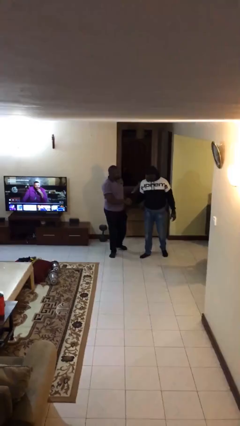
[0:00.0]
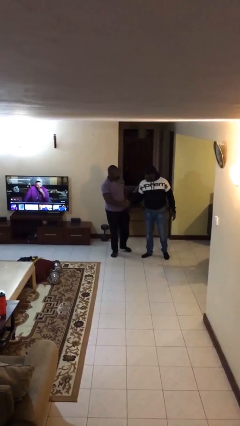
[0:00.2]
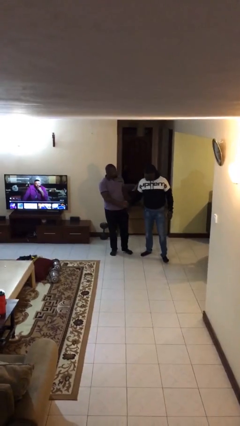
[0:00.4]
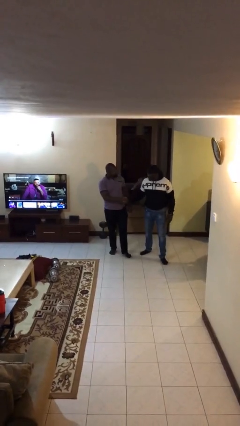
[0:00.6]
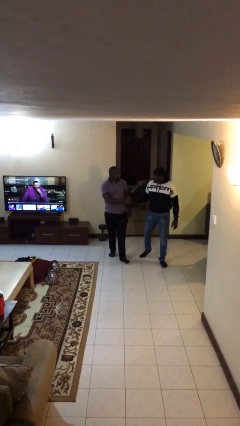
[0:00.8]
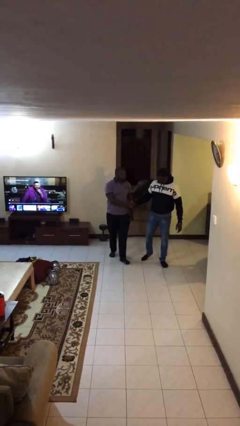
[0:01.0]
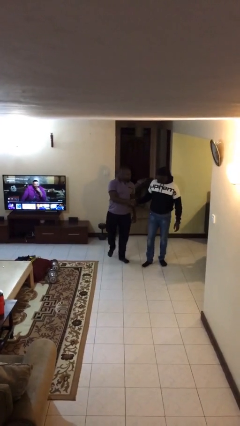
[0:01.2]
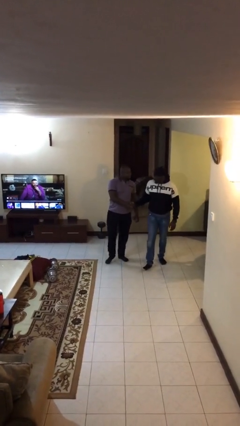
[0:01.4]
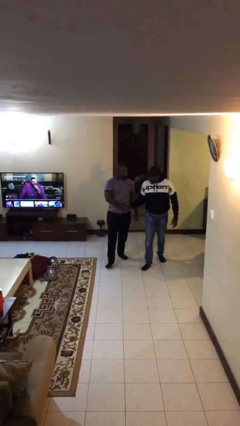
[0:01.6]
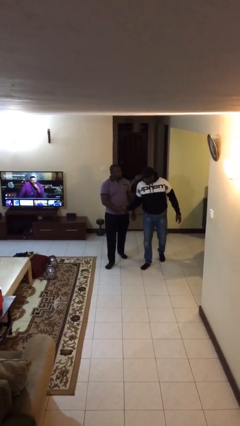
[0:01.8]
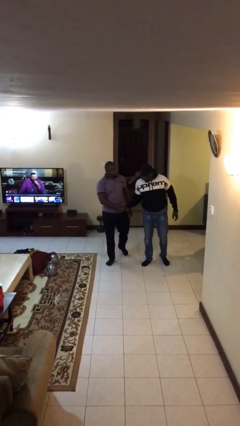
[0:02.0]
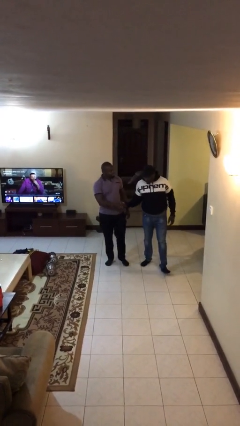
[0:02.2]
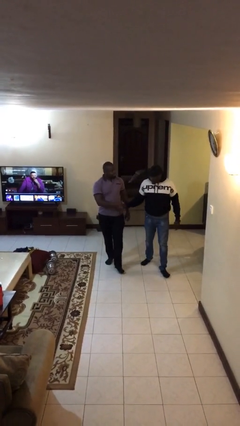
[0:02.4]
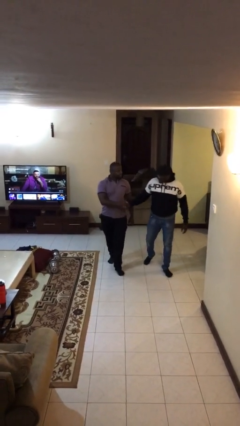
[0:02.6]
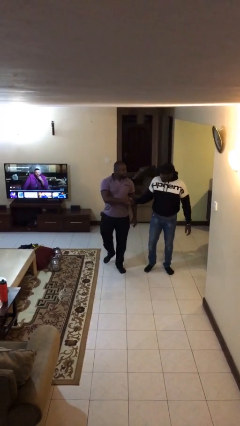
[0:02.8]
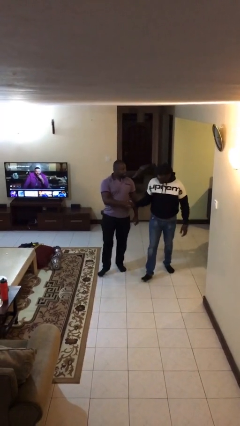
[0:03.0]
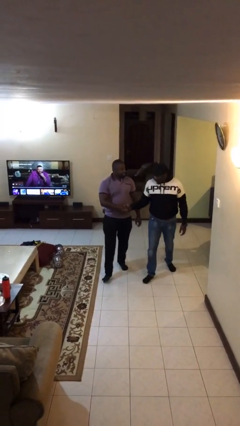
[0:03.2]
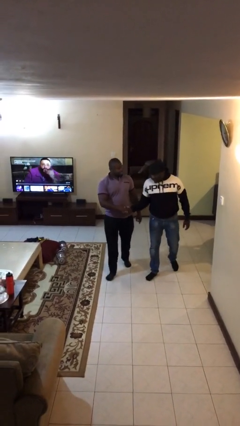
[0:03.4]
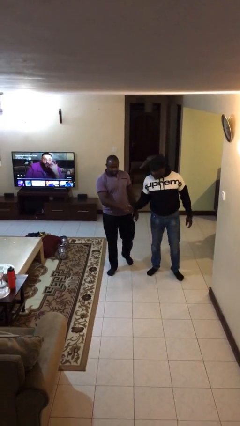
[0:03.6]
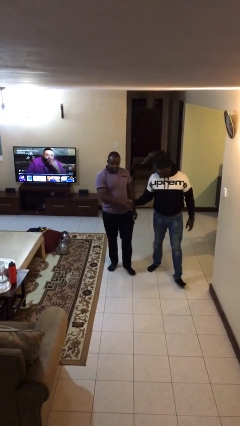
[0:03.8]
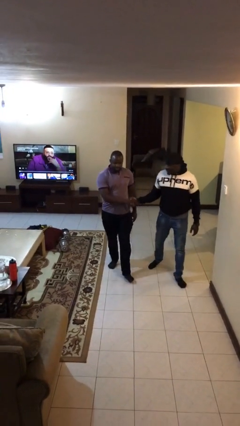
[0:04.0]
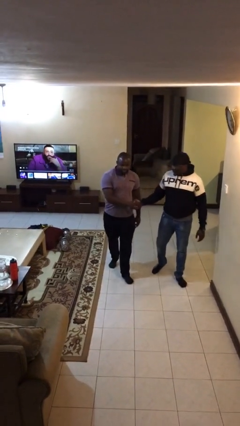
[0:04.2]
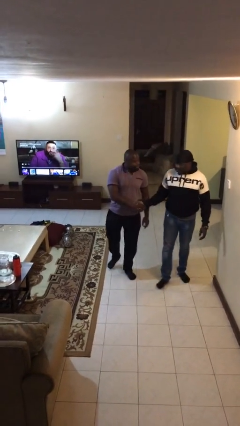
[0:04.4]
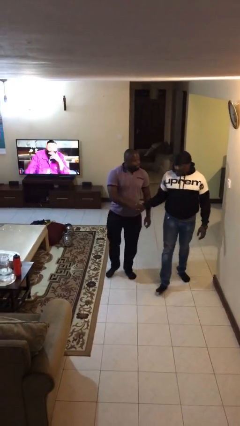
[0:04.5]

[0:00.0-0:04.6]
person holds hand

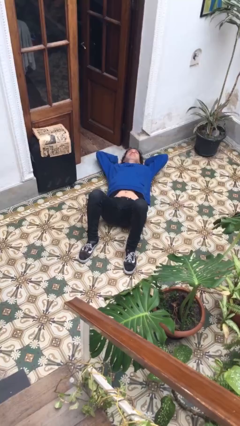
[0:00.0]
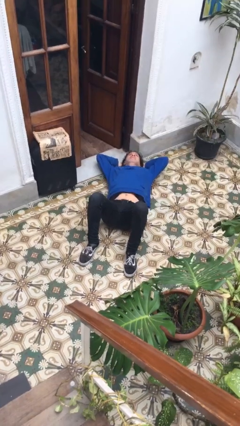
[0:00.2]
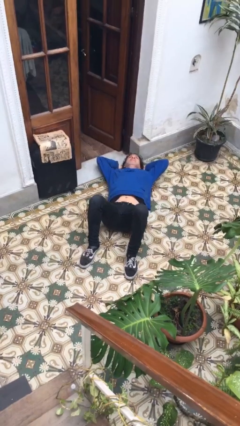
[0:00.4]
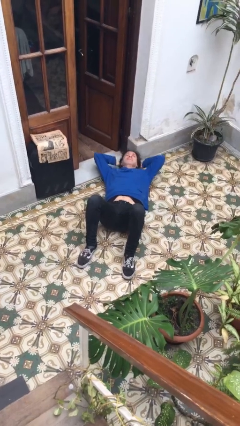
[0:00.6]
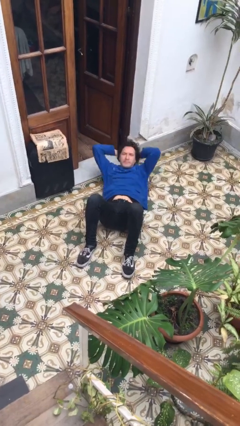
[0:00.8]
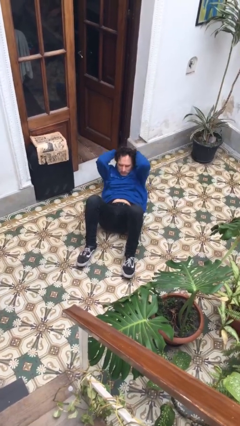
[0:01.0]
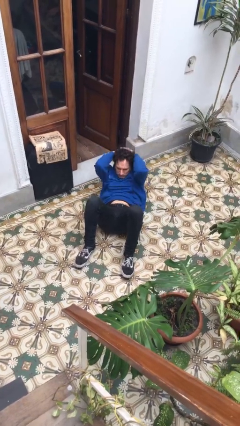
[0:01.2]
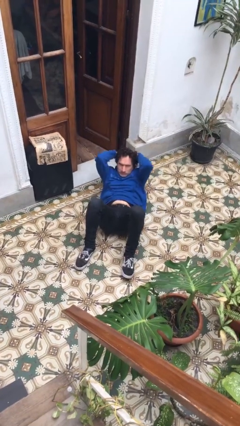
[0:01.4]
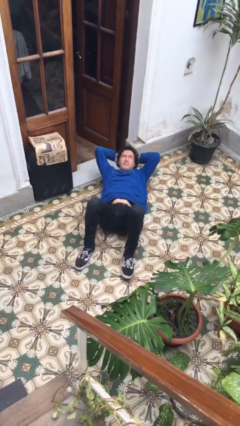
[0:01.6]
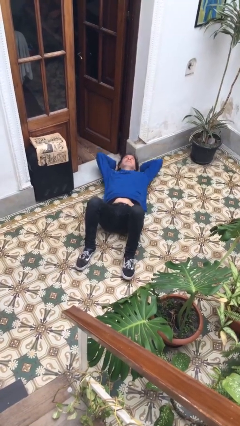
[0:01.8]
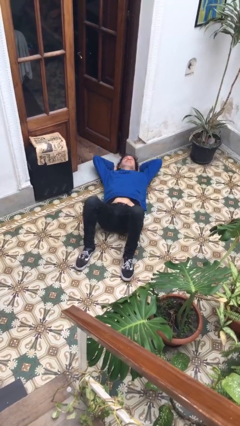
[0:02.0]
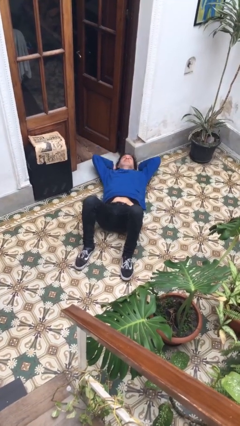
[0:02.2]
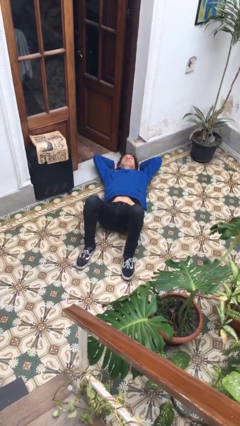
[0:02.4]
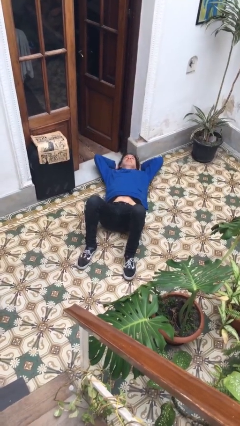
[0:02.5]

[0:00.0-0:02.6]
person exercises with situp

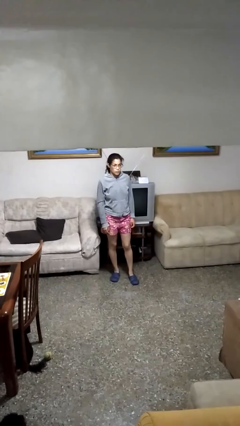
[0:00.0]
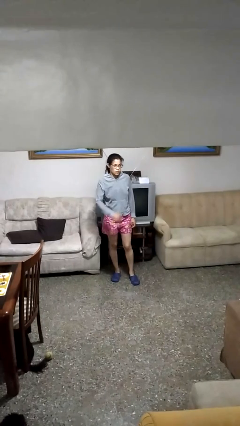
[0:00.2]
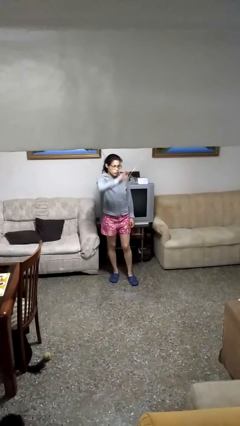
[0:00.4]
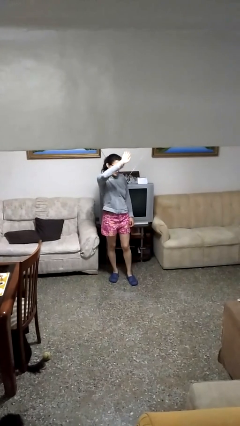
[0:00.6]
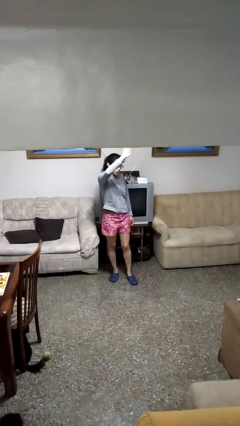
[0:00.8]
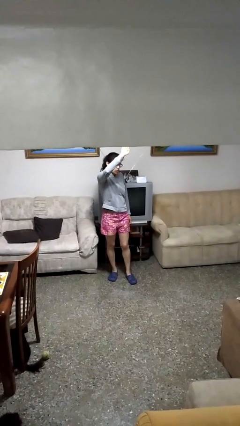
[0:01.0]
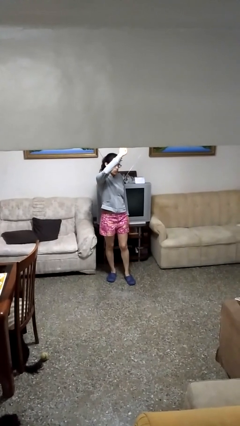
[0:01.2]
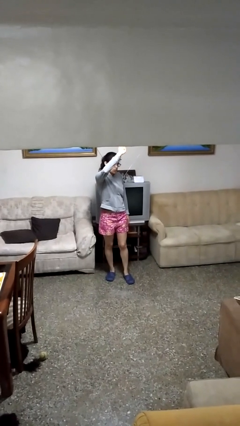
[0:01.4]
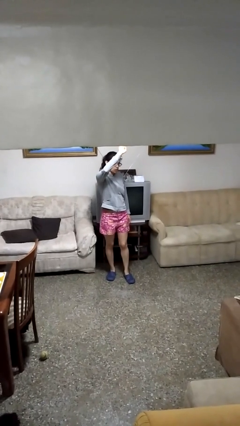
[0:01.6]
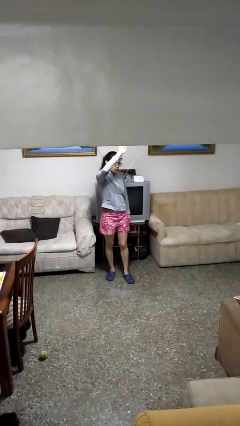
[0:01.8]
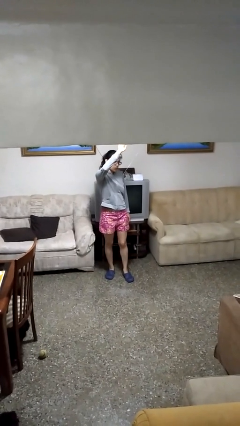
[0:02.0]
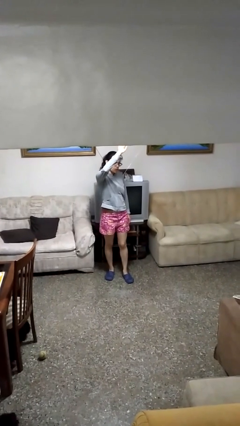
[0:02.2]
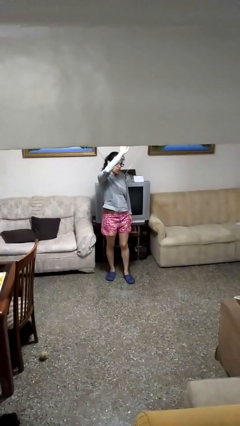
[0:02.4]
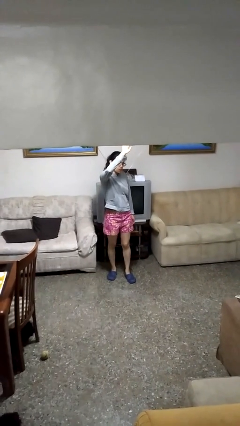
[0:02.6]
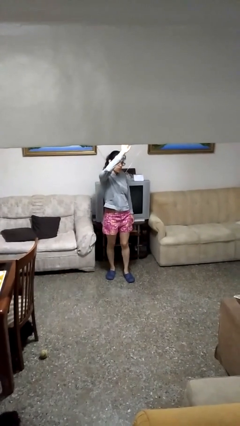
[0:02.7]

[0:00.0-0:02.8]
person gestures raise hand

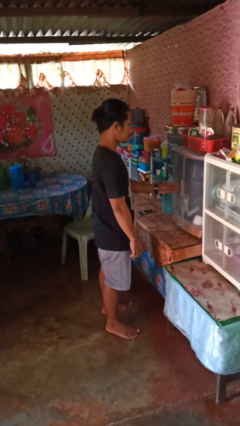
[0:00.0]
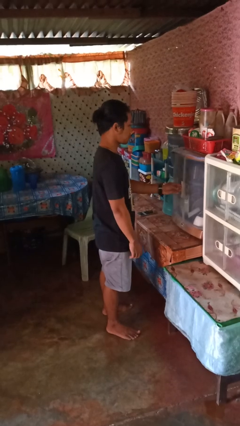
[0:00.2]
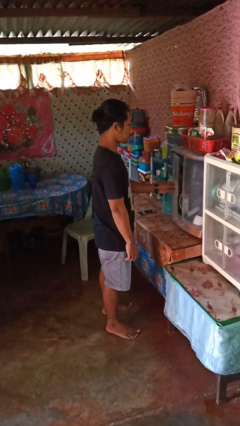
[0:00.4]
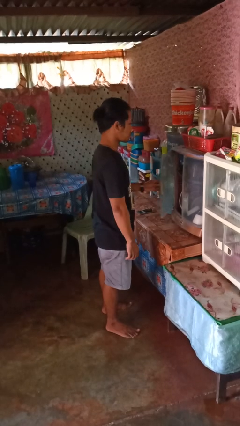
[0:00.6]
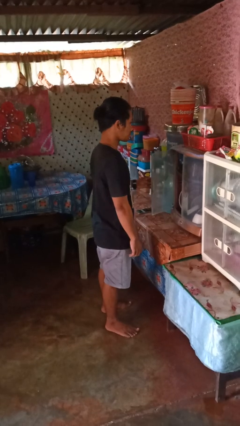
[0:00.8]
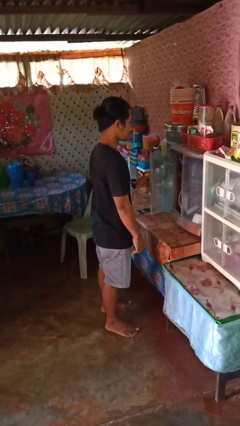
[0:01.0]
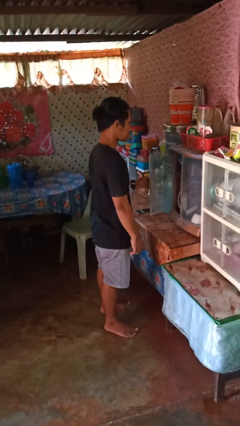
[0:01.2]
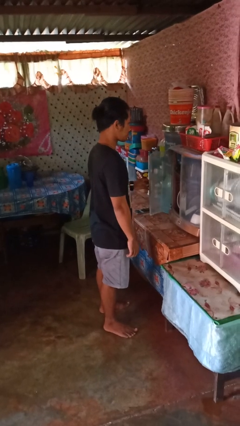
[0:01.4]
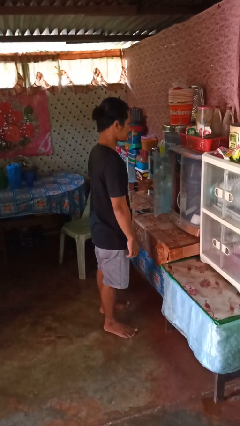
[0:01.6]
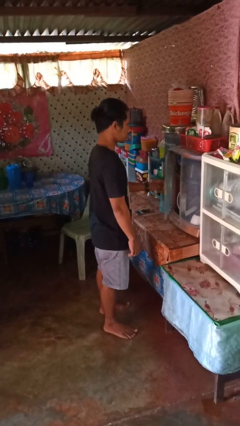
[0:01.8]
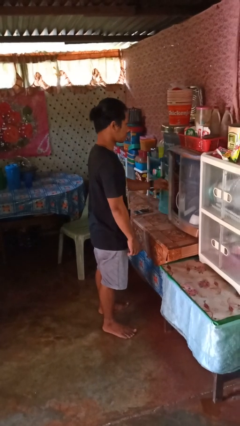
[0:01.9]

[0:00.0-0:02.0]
person opens cabinet

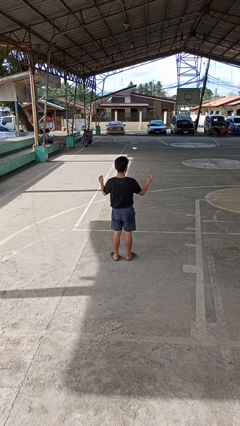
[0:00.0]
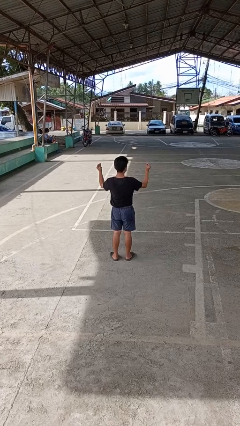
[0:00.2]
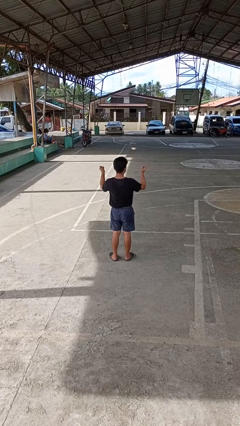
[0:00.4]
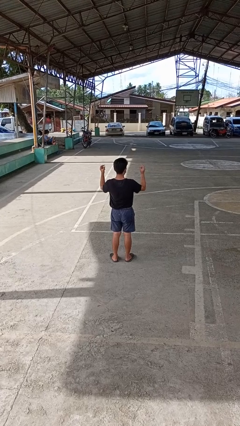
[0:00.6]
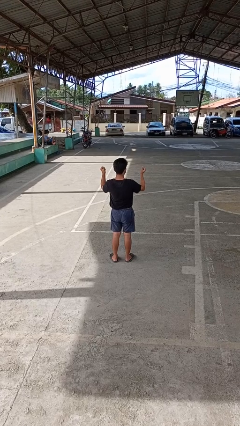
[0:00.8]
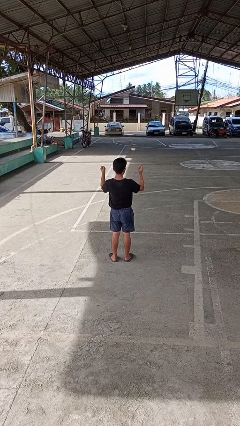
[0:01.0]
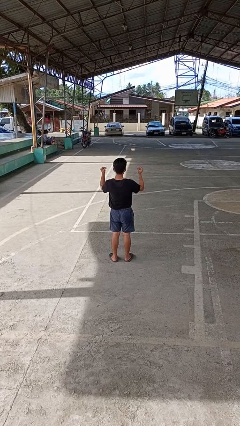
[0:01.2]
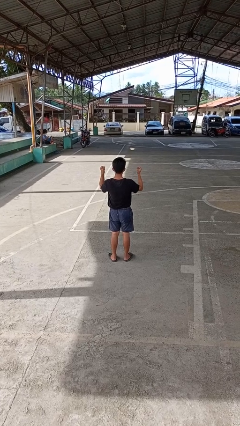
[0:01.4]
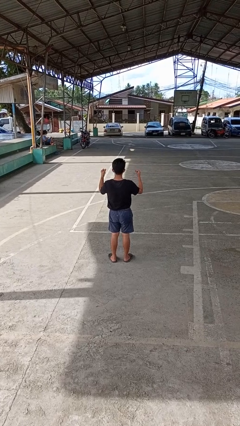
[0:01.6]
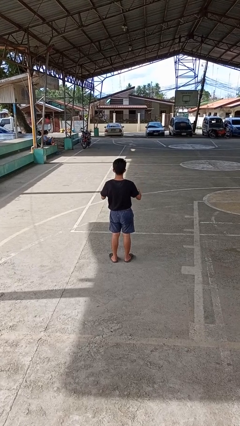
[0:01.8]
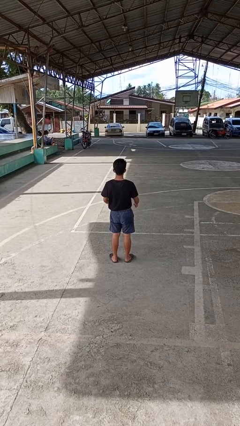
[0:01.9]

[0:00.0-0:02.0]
person snaps fingers

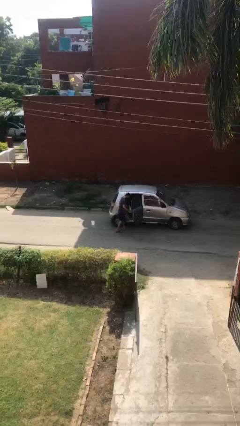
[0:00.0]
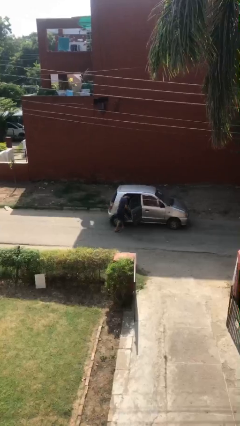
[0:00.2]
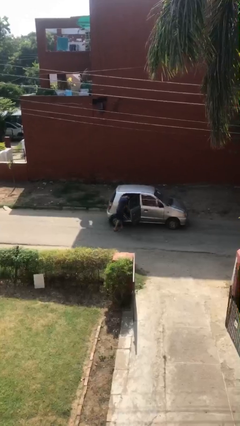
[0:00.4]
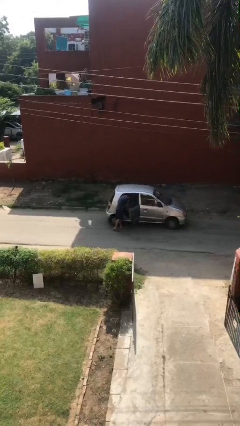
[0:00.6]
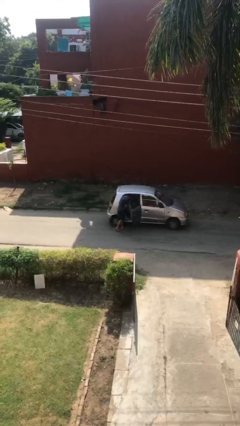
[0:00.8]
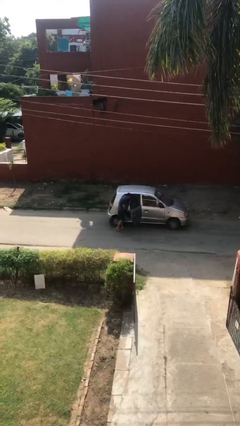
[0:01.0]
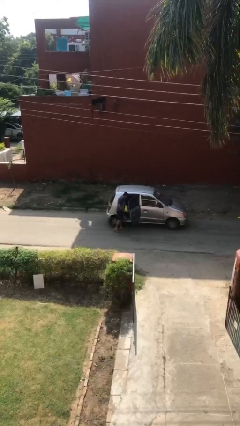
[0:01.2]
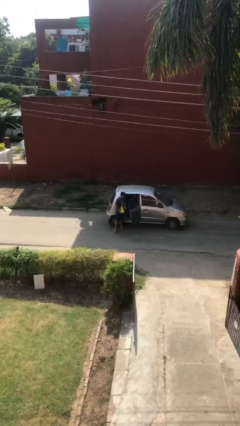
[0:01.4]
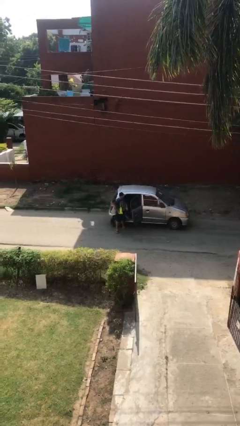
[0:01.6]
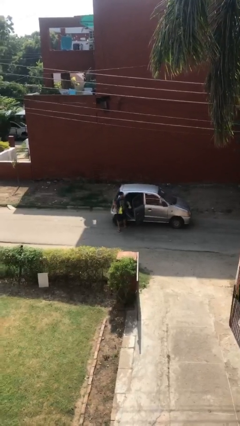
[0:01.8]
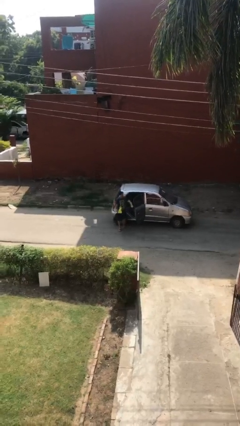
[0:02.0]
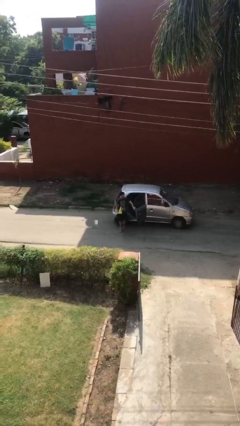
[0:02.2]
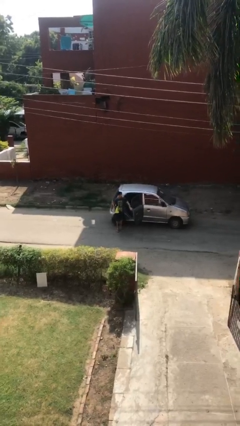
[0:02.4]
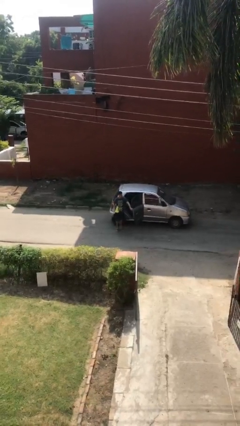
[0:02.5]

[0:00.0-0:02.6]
person unloads car

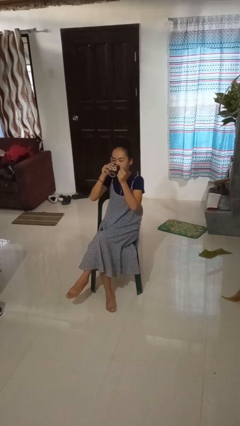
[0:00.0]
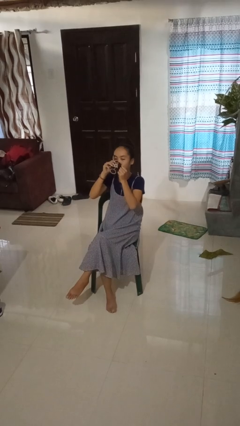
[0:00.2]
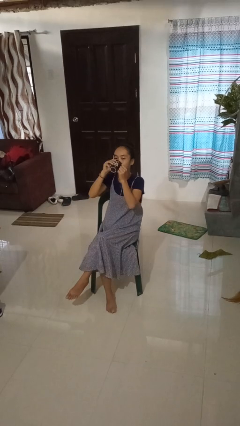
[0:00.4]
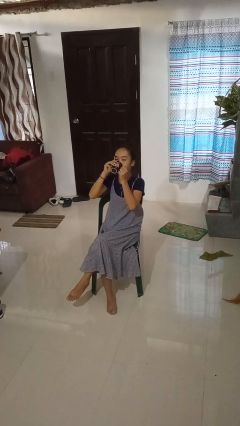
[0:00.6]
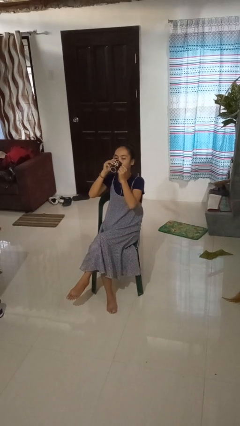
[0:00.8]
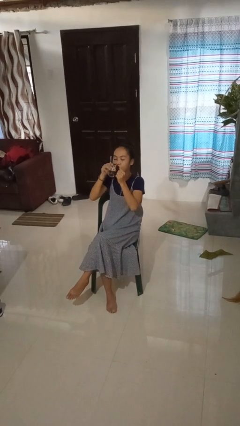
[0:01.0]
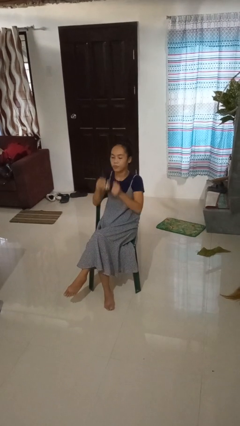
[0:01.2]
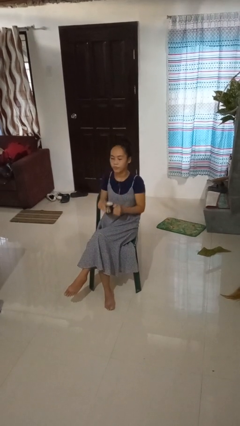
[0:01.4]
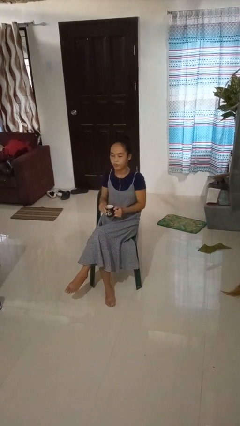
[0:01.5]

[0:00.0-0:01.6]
person drinks from mug
